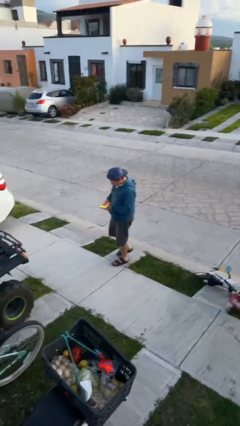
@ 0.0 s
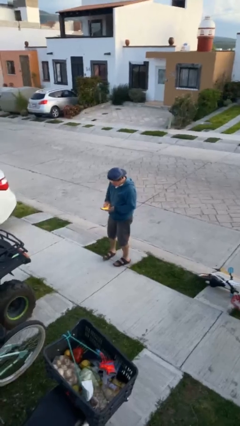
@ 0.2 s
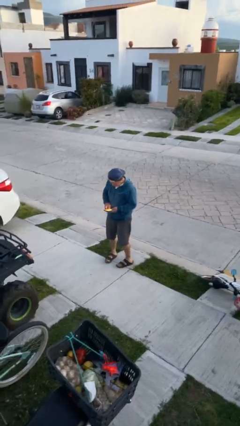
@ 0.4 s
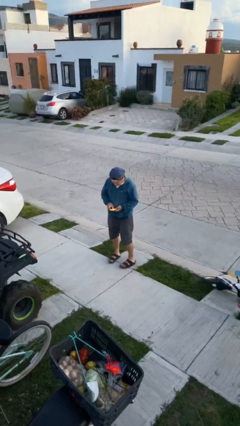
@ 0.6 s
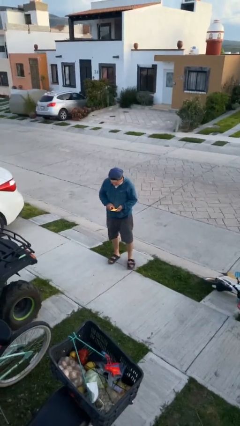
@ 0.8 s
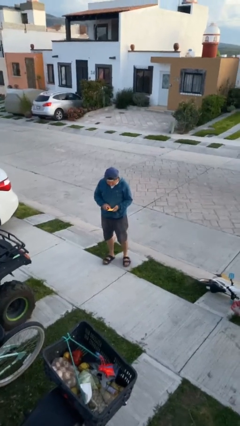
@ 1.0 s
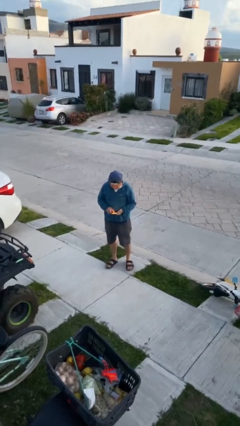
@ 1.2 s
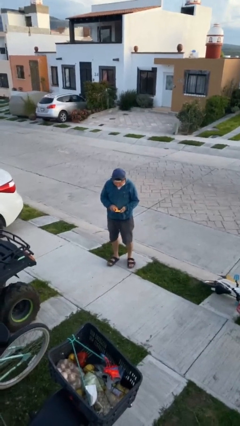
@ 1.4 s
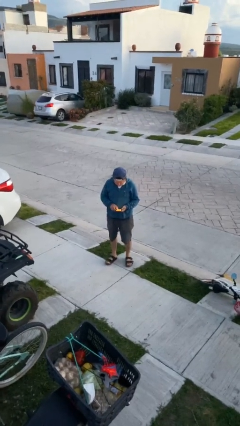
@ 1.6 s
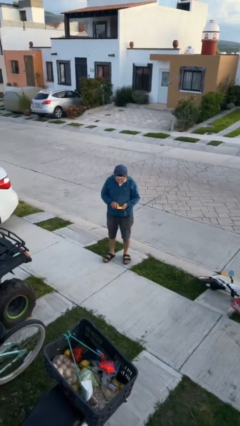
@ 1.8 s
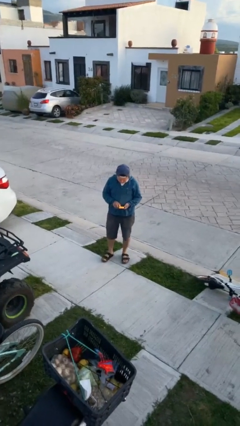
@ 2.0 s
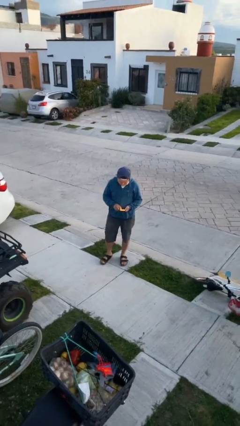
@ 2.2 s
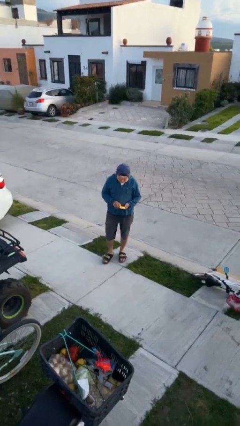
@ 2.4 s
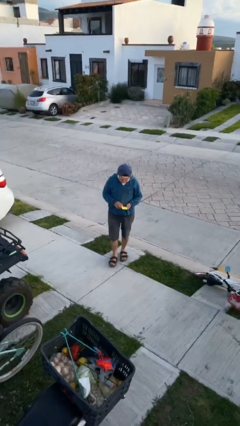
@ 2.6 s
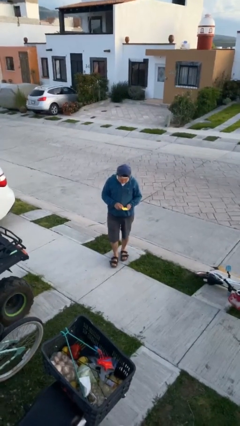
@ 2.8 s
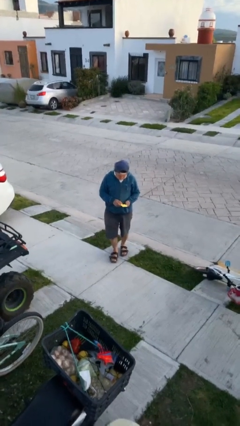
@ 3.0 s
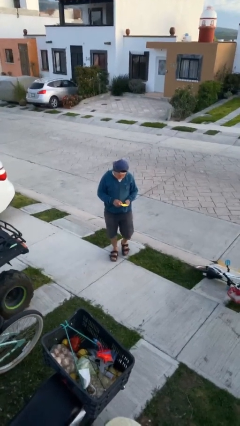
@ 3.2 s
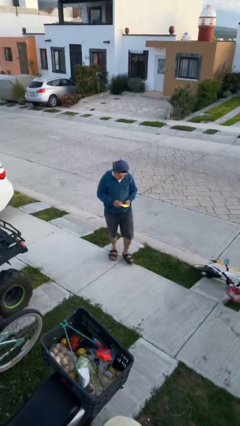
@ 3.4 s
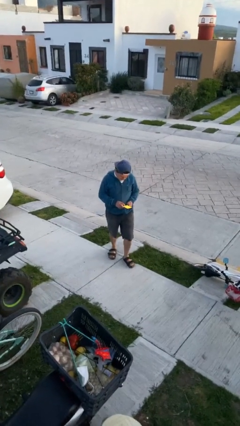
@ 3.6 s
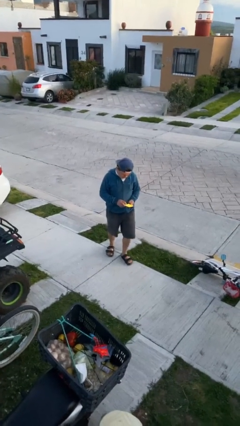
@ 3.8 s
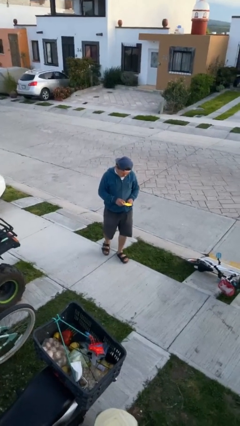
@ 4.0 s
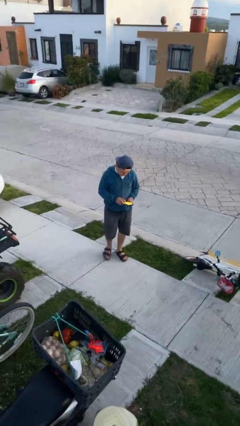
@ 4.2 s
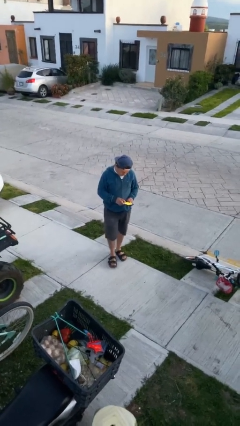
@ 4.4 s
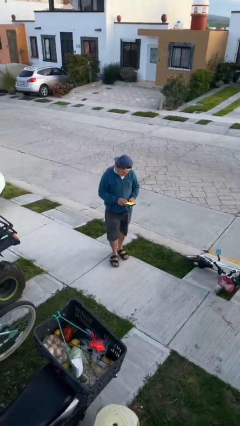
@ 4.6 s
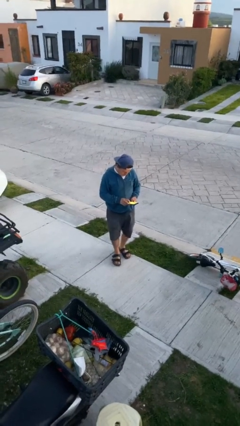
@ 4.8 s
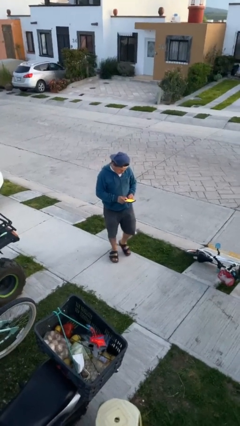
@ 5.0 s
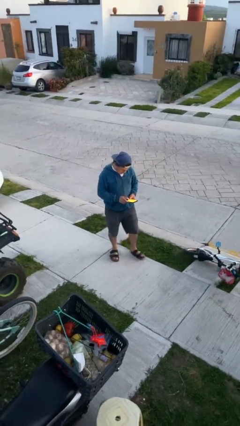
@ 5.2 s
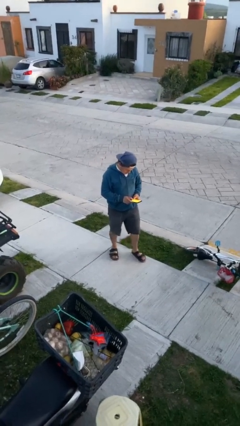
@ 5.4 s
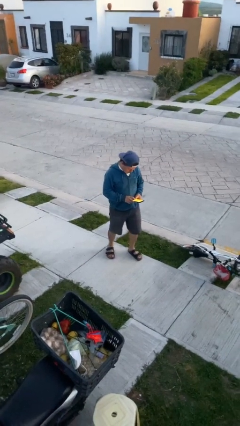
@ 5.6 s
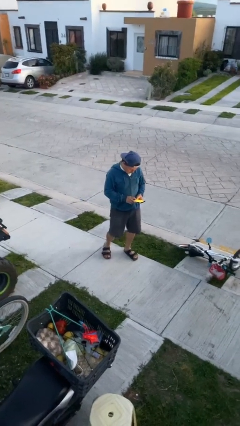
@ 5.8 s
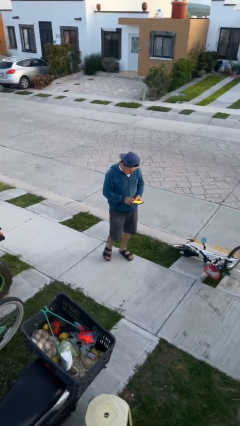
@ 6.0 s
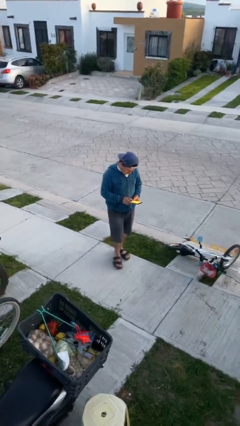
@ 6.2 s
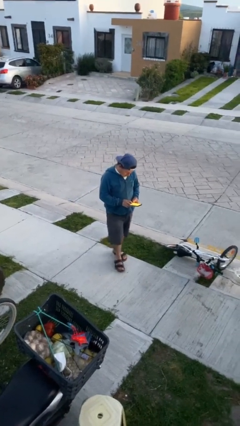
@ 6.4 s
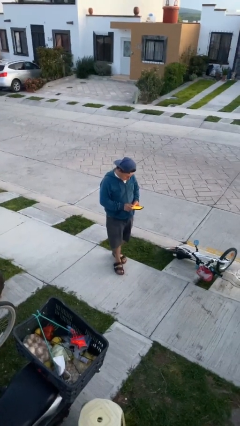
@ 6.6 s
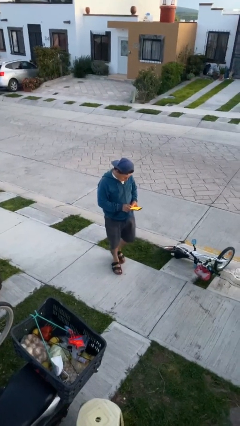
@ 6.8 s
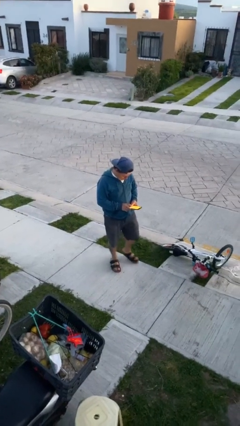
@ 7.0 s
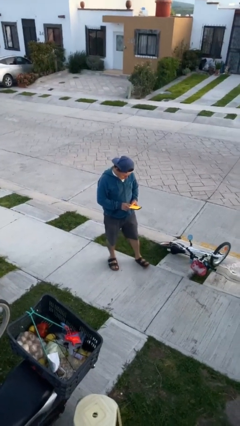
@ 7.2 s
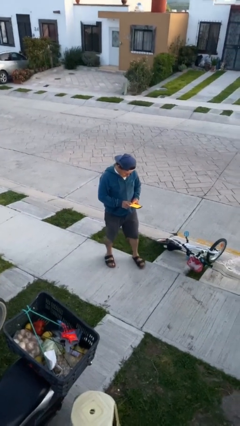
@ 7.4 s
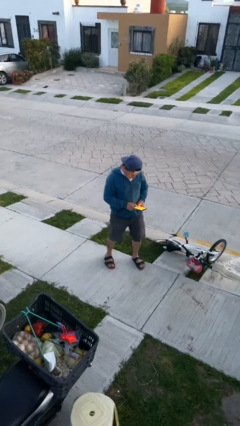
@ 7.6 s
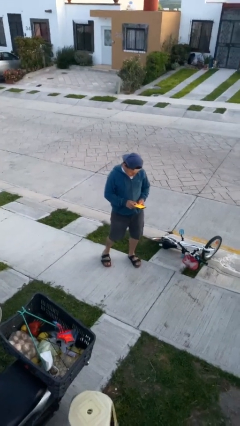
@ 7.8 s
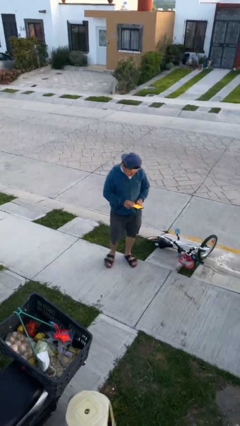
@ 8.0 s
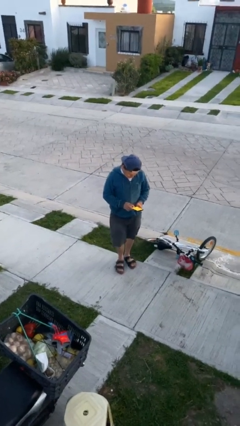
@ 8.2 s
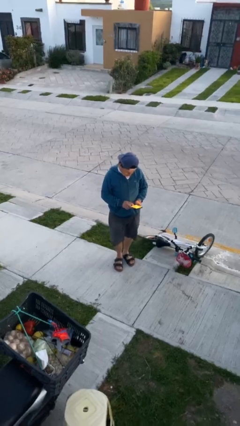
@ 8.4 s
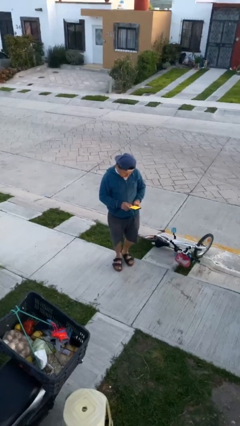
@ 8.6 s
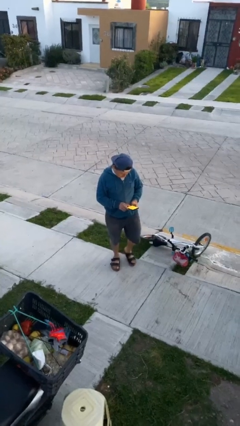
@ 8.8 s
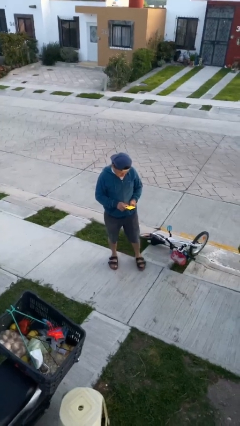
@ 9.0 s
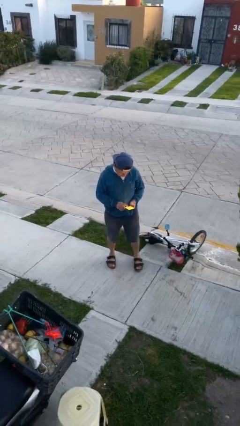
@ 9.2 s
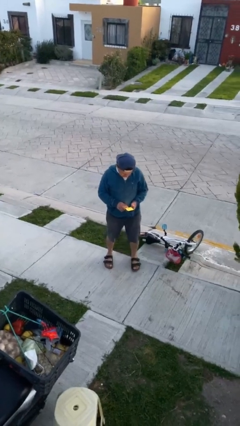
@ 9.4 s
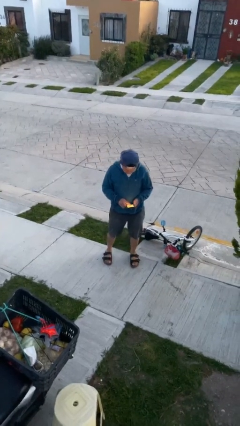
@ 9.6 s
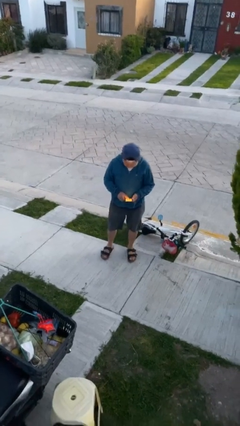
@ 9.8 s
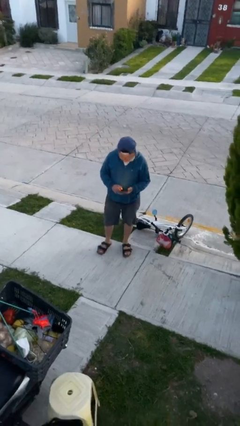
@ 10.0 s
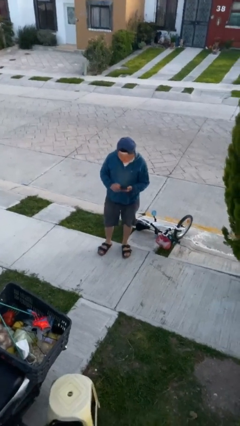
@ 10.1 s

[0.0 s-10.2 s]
person texts on phone

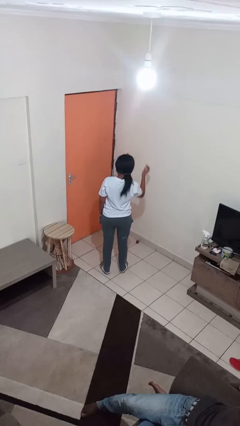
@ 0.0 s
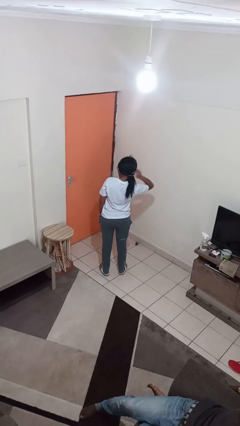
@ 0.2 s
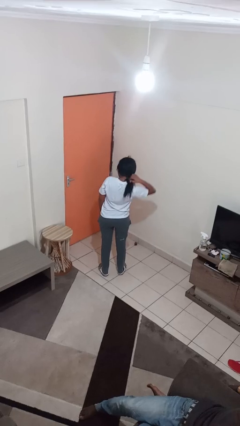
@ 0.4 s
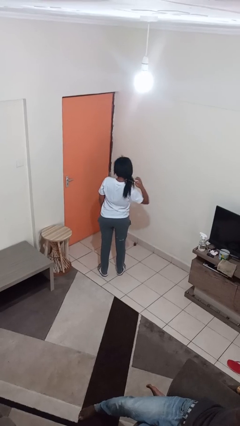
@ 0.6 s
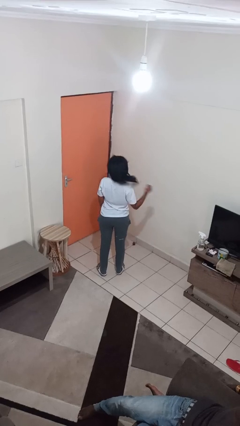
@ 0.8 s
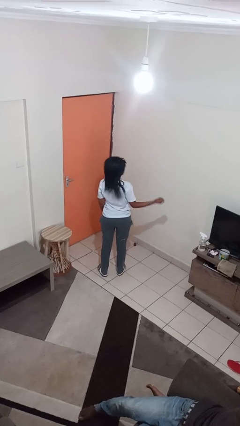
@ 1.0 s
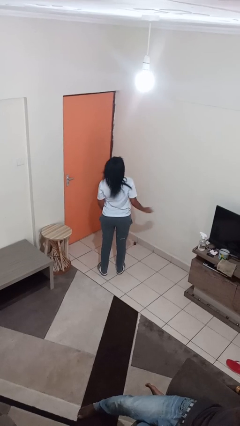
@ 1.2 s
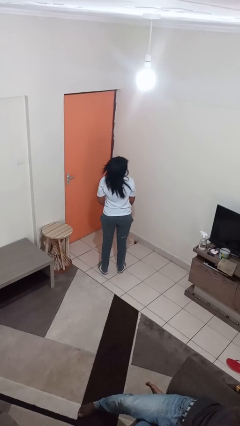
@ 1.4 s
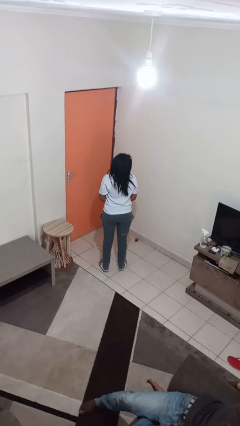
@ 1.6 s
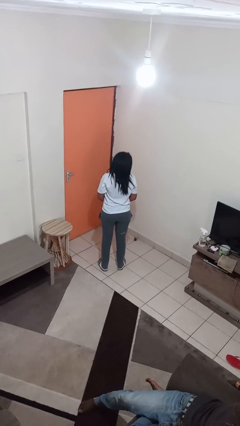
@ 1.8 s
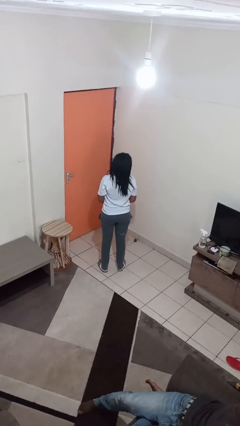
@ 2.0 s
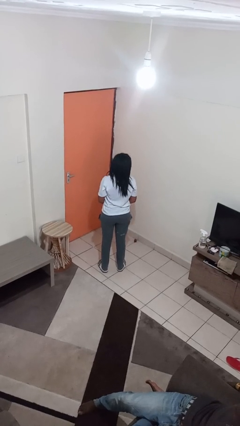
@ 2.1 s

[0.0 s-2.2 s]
person takes off hairtie

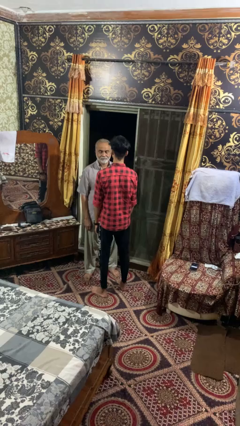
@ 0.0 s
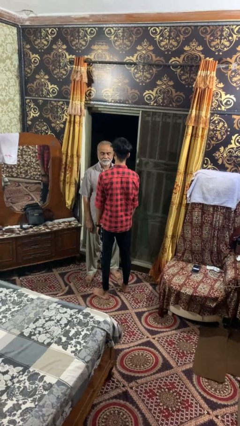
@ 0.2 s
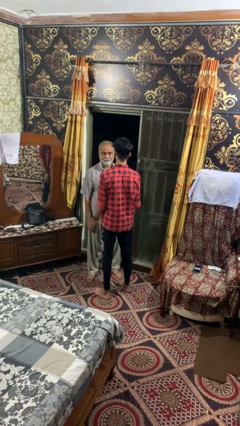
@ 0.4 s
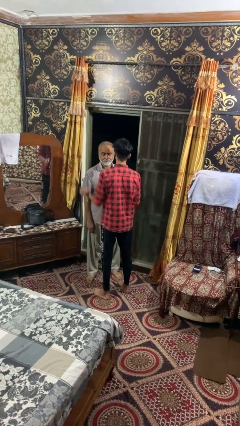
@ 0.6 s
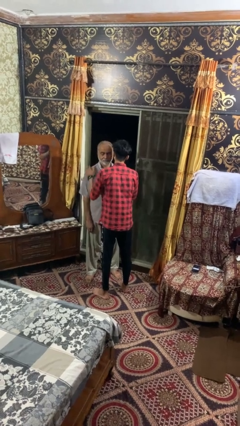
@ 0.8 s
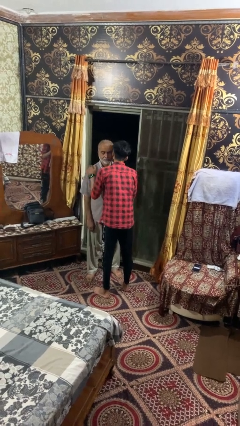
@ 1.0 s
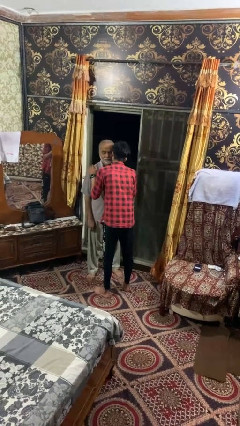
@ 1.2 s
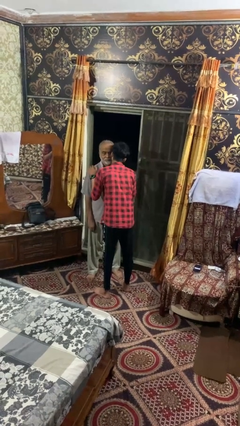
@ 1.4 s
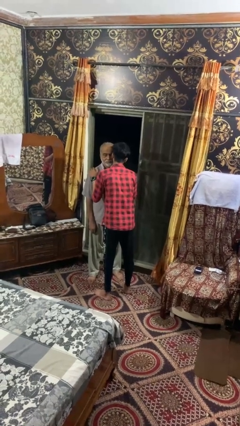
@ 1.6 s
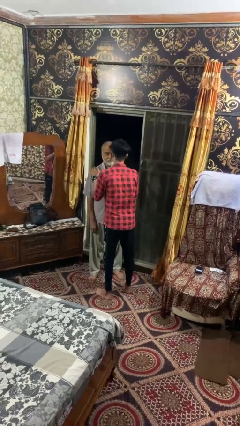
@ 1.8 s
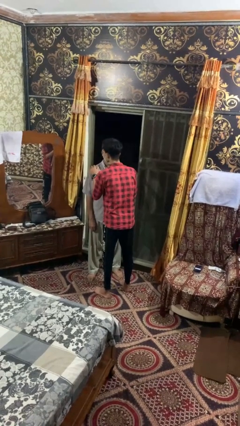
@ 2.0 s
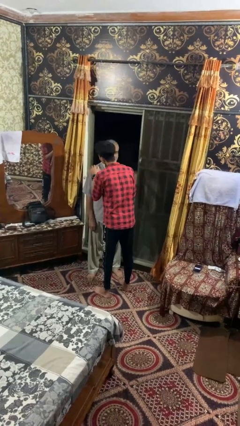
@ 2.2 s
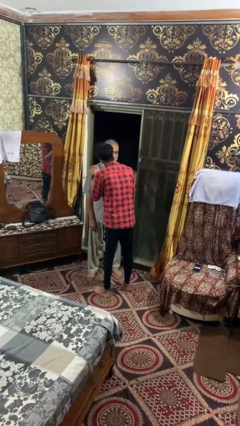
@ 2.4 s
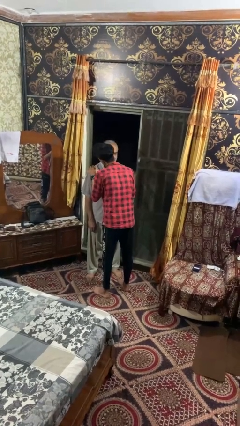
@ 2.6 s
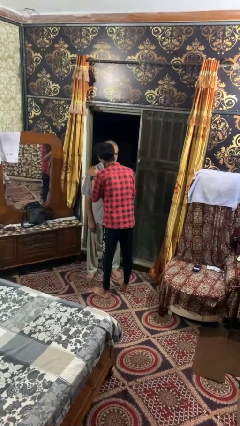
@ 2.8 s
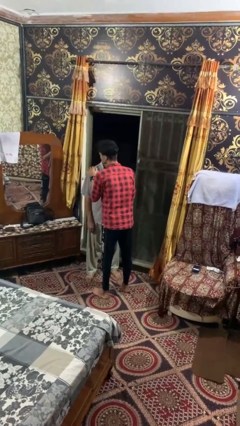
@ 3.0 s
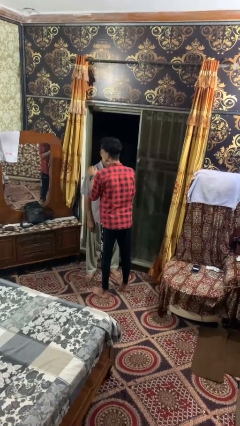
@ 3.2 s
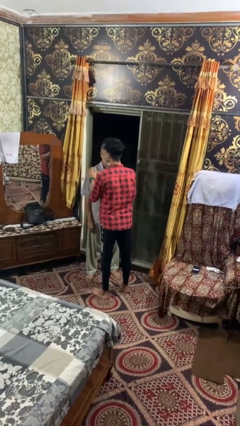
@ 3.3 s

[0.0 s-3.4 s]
person kisses cheek of person

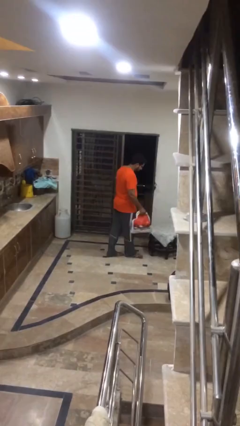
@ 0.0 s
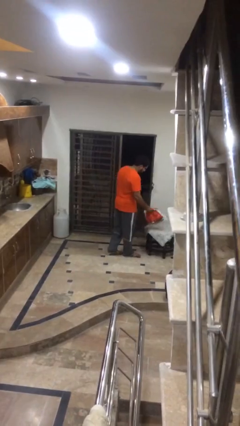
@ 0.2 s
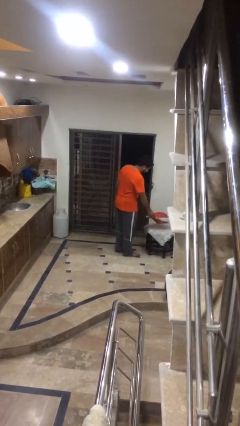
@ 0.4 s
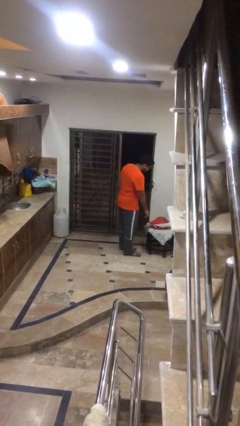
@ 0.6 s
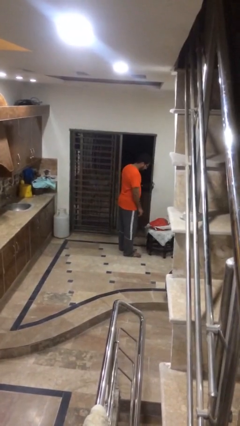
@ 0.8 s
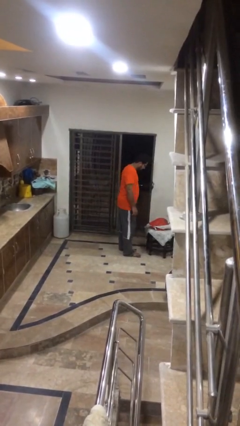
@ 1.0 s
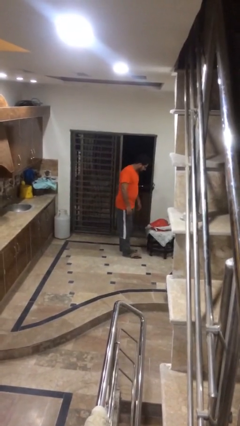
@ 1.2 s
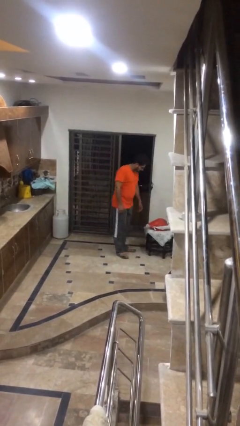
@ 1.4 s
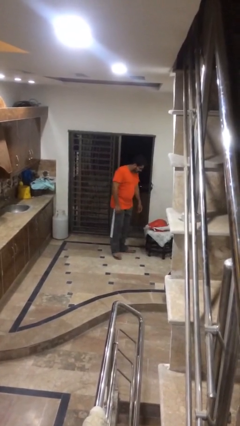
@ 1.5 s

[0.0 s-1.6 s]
person puts down object on table

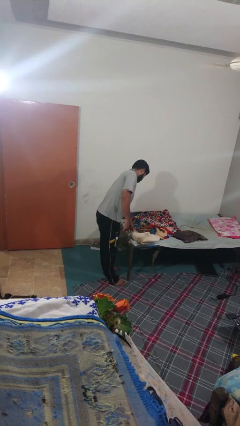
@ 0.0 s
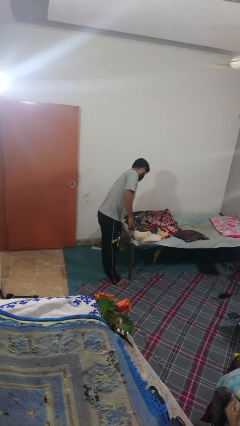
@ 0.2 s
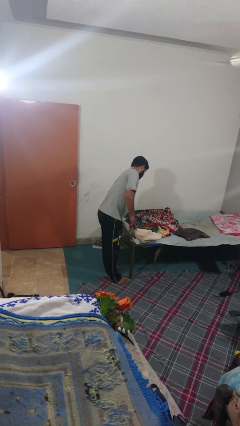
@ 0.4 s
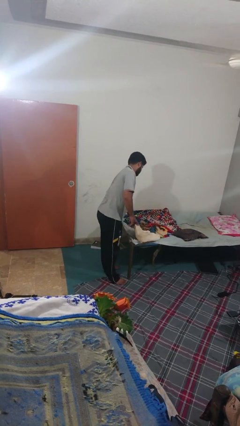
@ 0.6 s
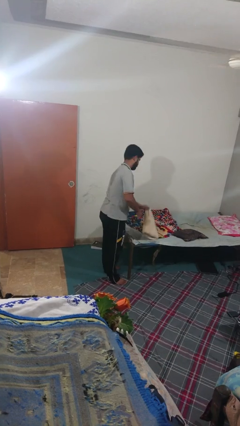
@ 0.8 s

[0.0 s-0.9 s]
person folds towel
